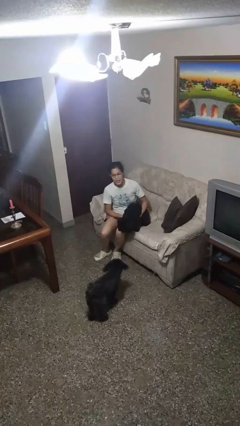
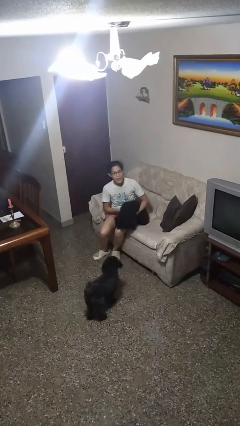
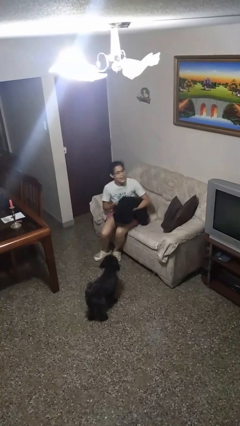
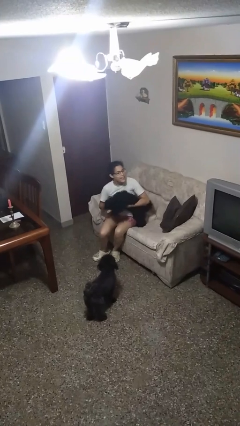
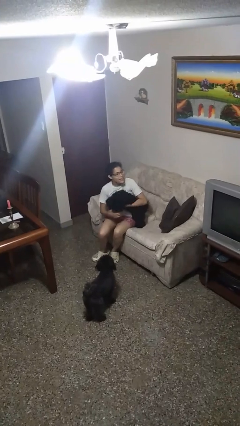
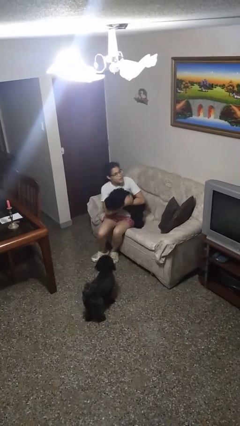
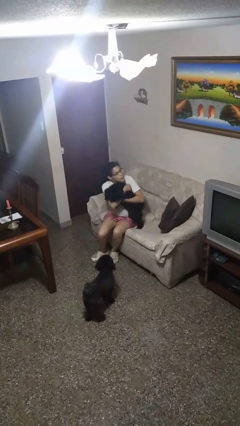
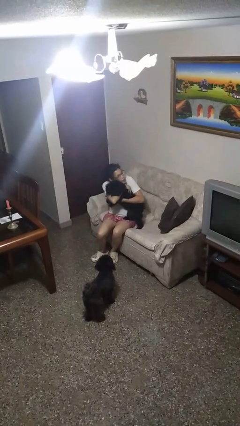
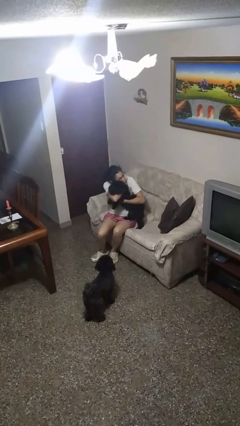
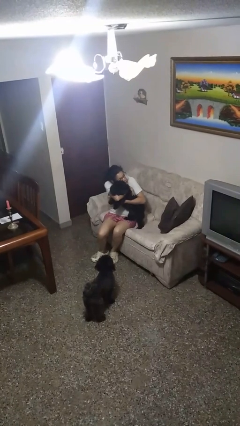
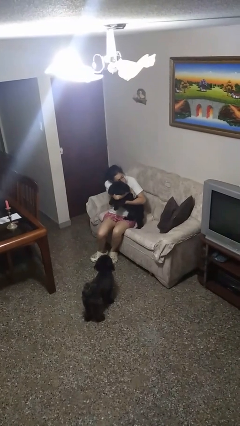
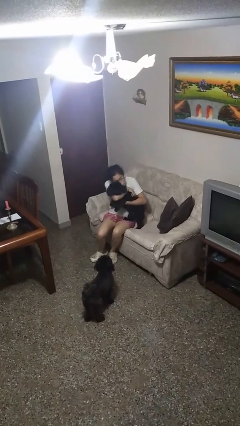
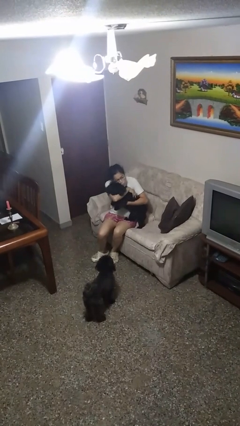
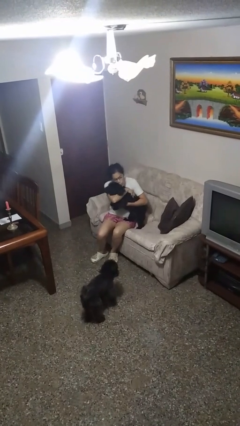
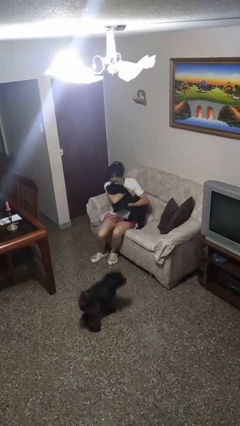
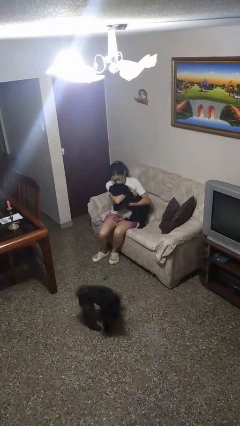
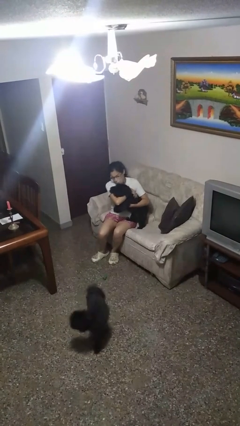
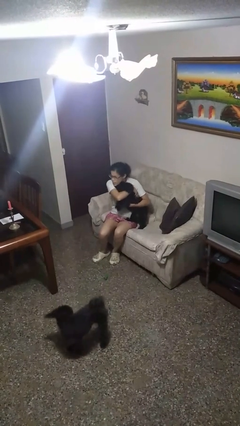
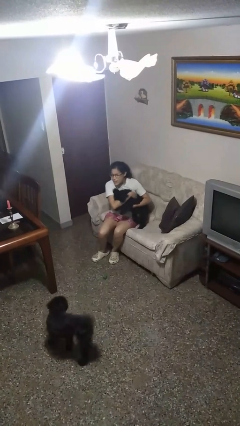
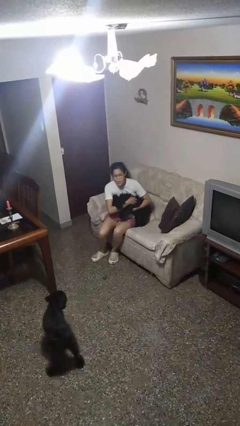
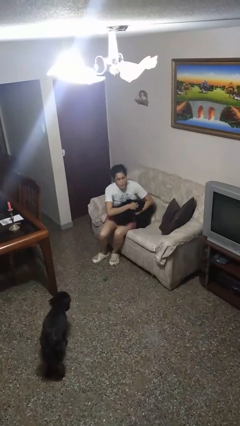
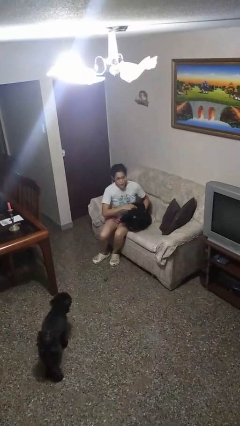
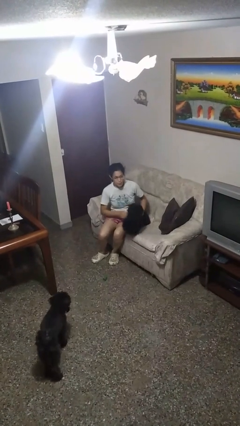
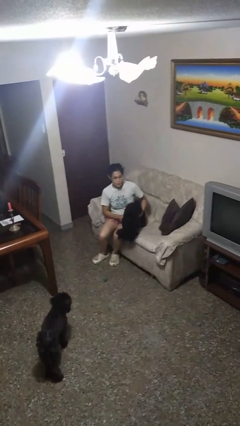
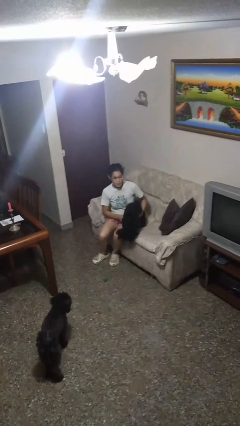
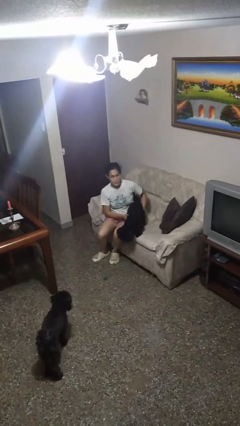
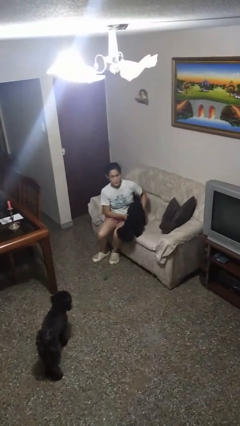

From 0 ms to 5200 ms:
person hugs dog

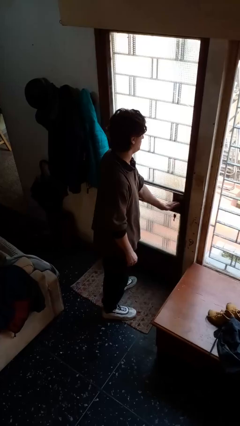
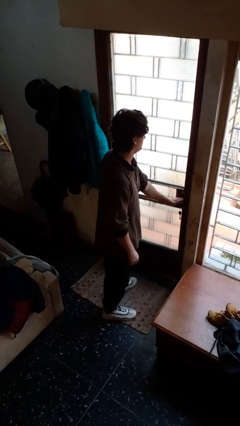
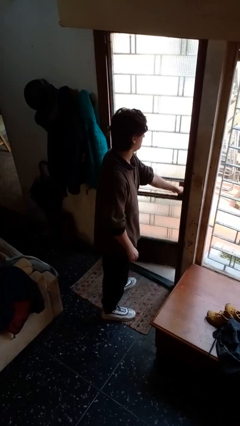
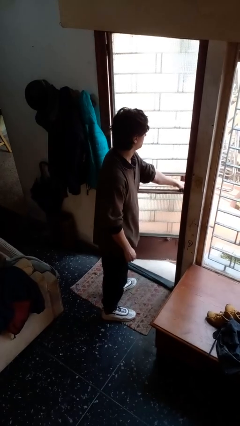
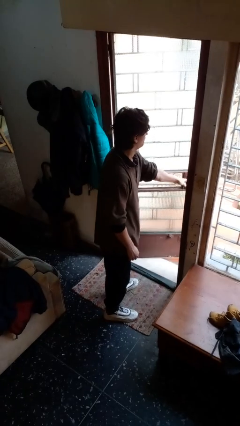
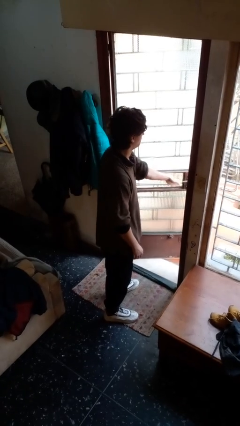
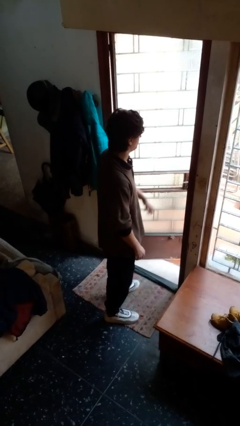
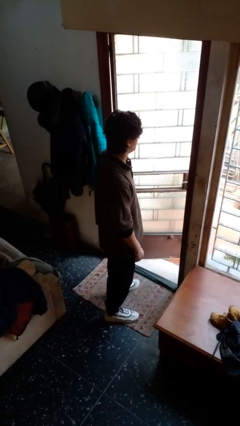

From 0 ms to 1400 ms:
person opens facility door

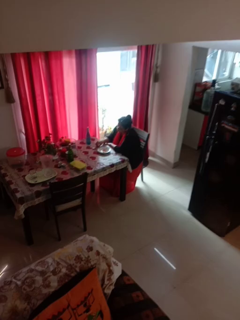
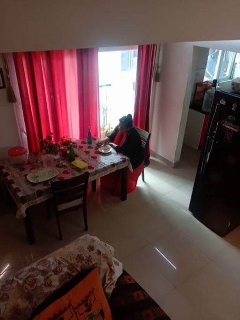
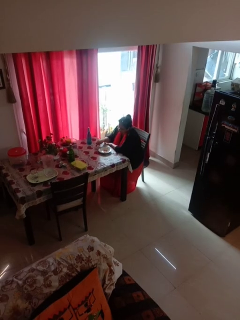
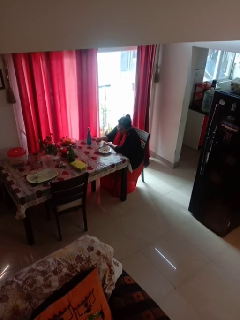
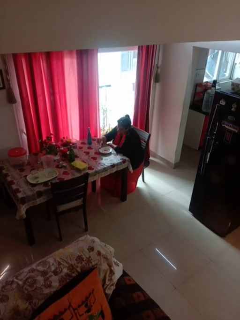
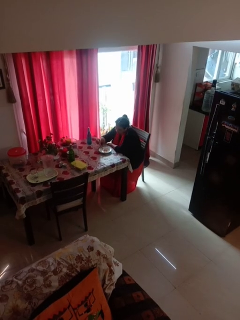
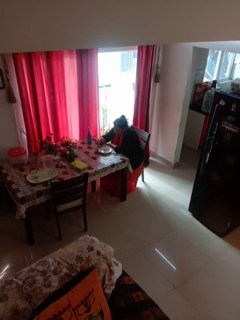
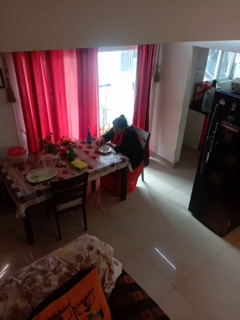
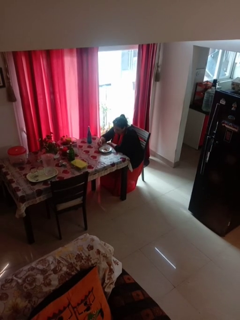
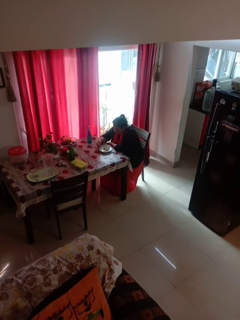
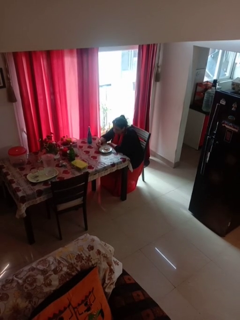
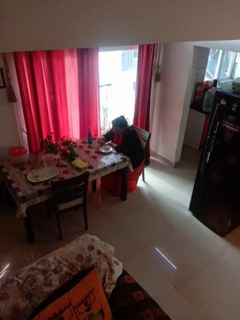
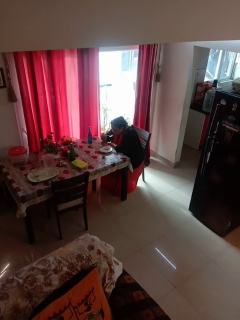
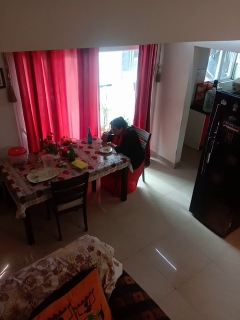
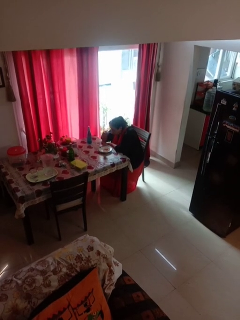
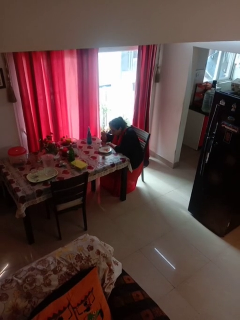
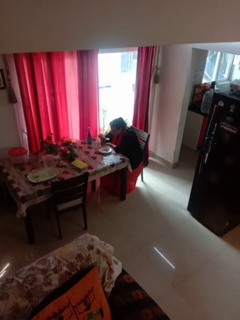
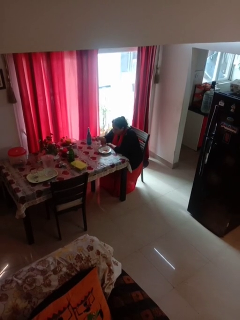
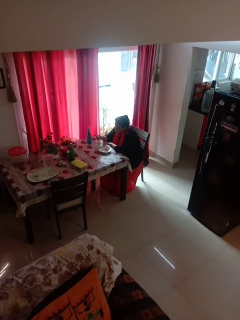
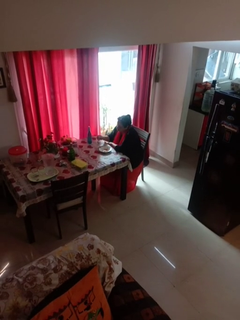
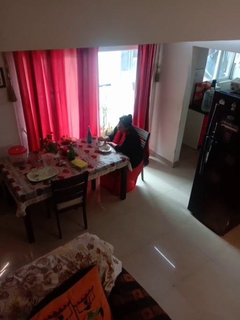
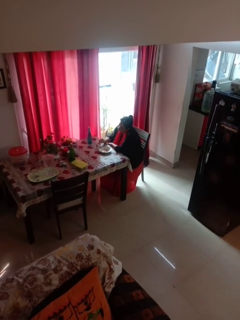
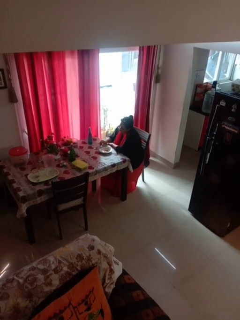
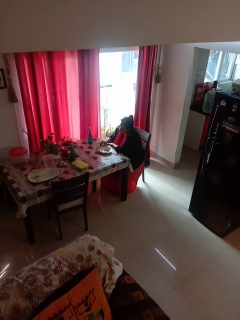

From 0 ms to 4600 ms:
person eats with utensil

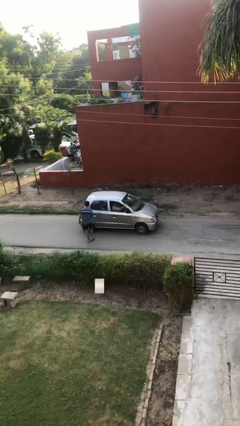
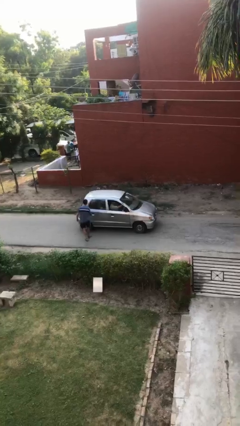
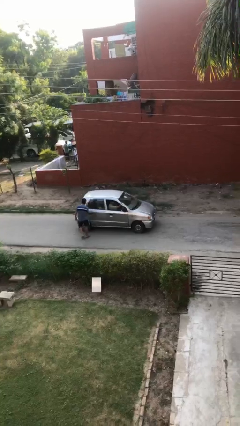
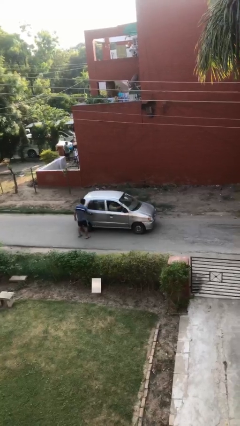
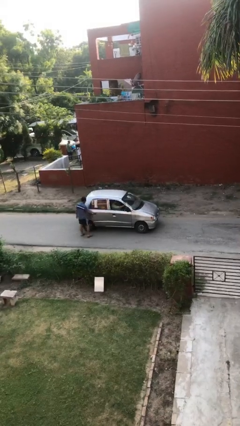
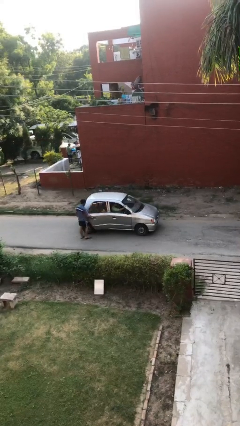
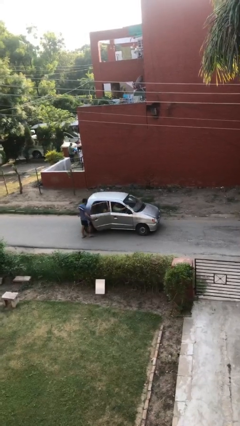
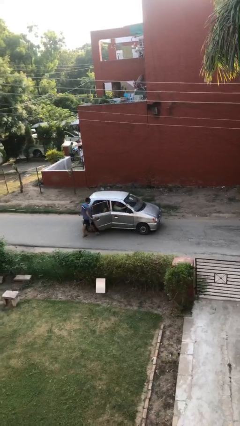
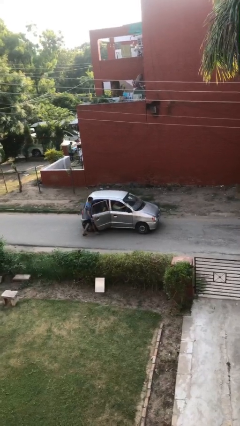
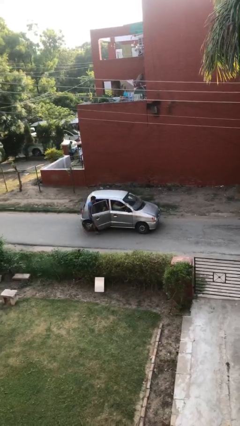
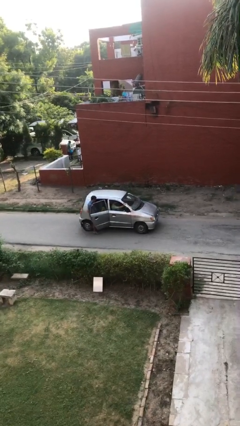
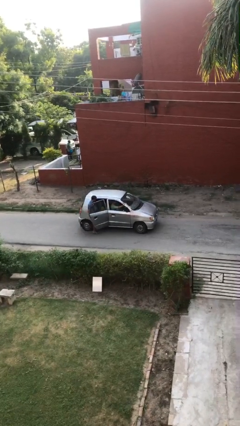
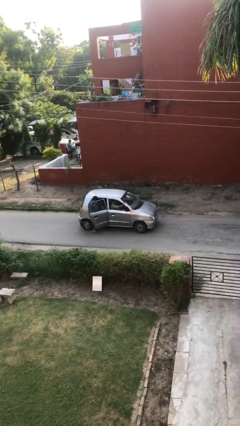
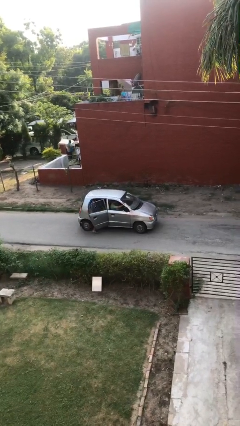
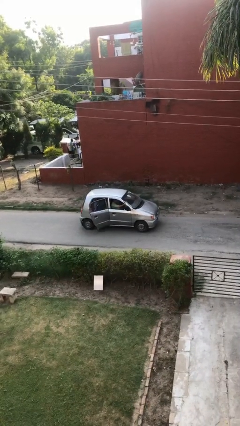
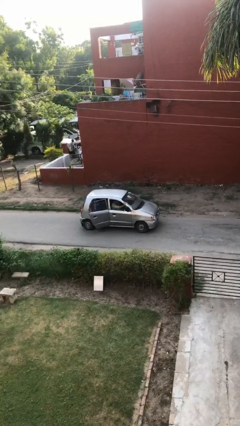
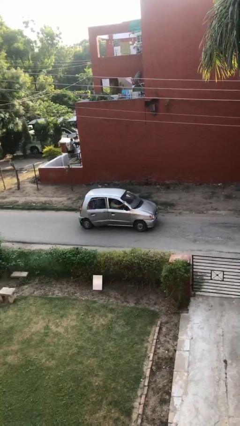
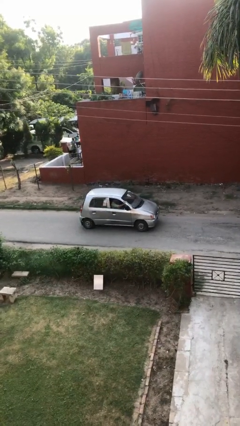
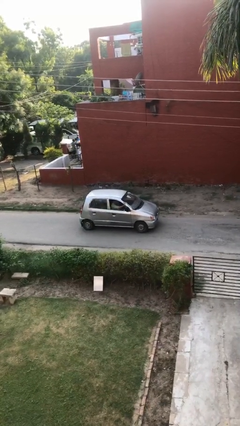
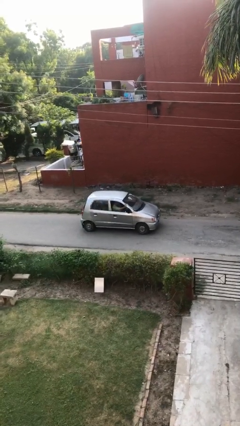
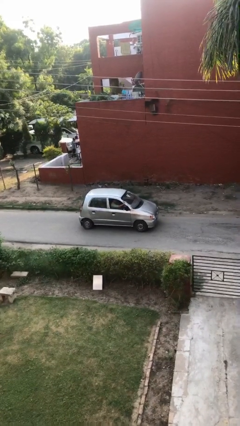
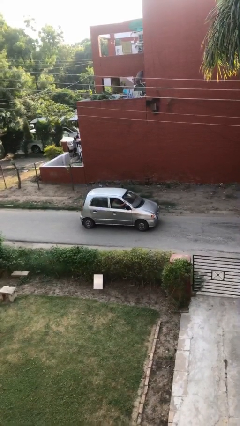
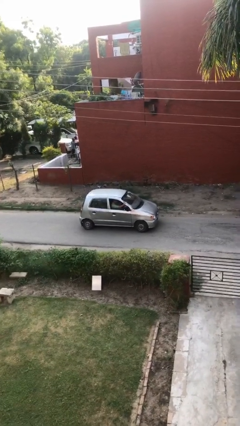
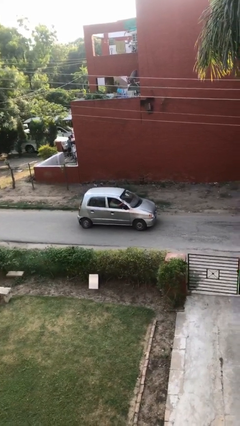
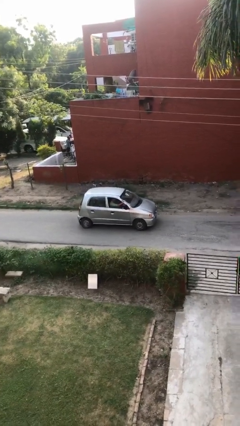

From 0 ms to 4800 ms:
car picks up person

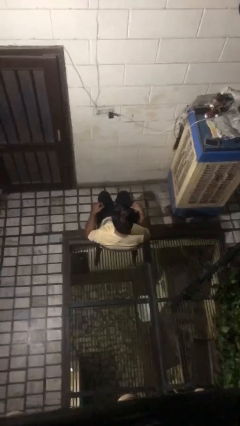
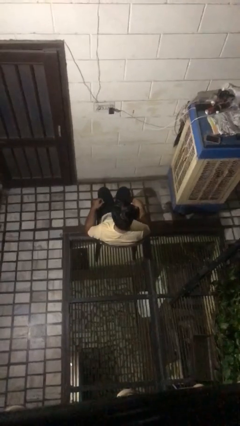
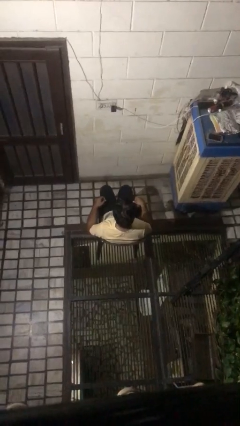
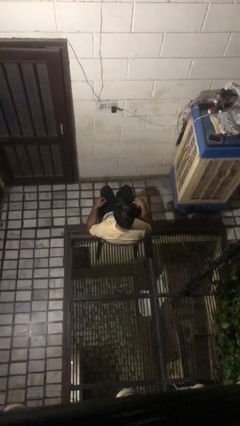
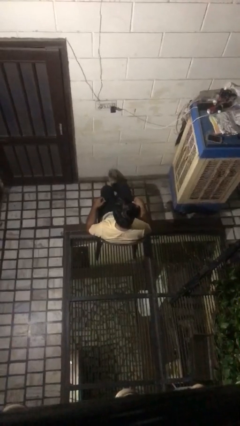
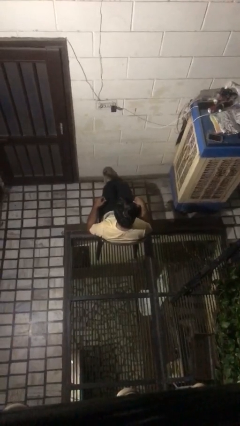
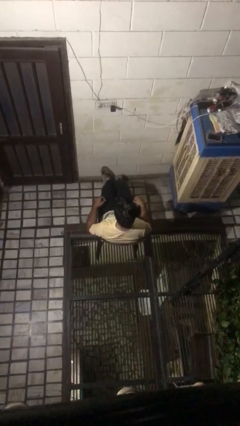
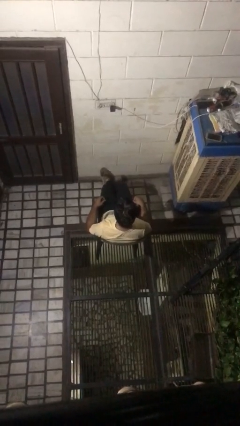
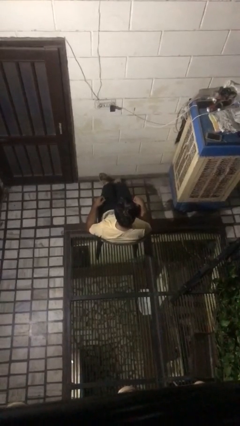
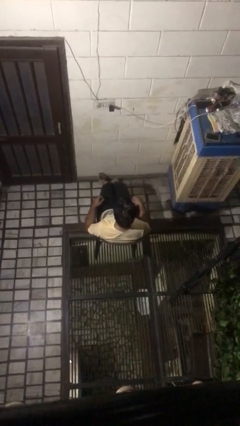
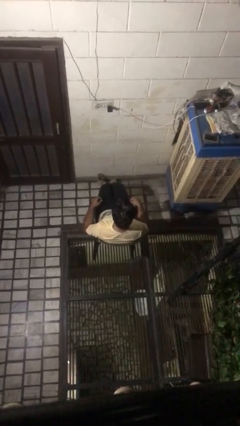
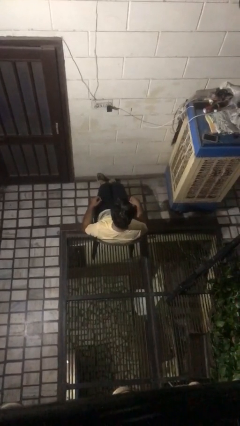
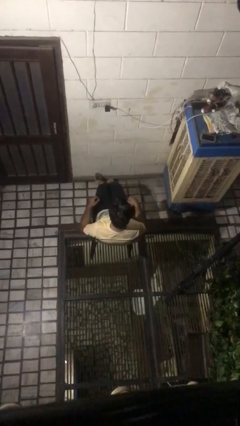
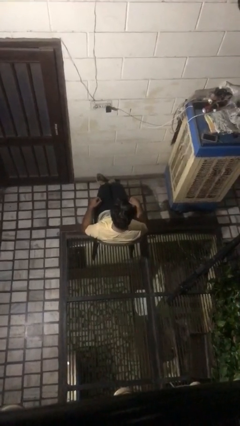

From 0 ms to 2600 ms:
person crosses legs
